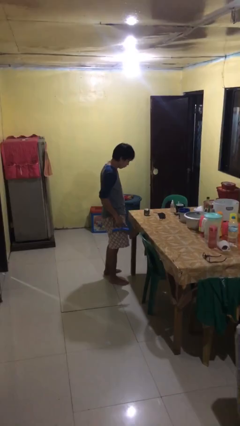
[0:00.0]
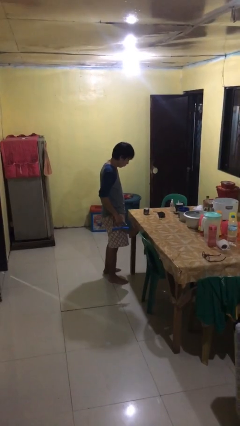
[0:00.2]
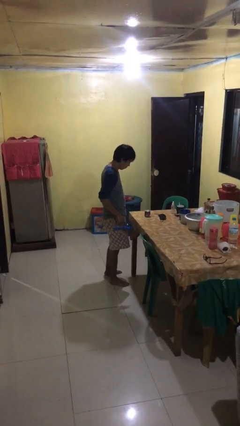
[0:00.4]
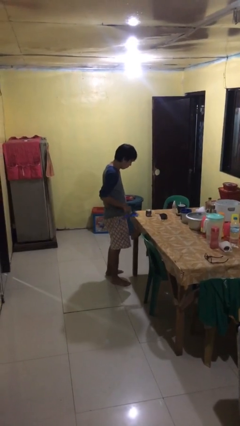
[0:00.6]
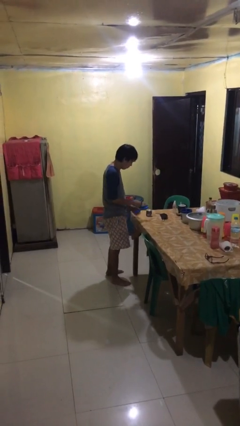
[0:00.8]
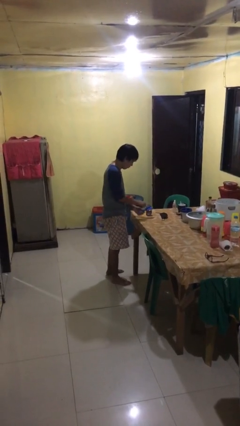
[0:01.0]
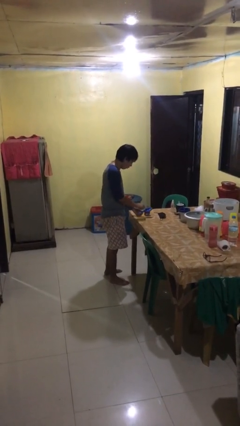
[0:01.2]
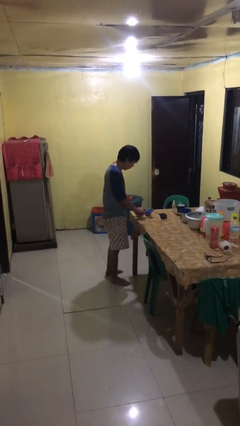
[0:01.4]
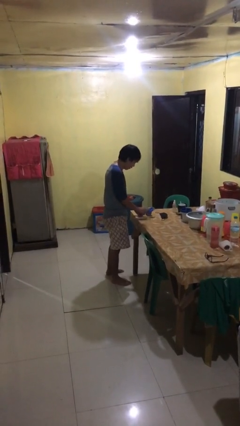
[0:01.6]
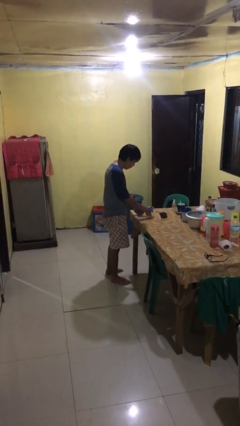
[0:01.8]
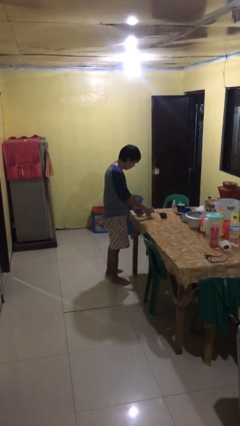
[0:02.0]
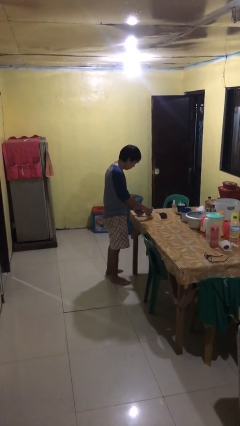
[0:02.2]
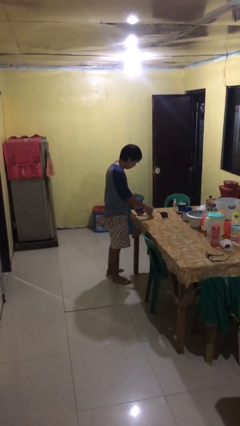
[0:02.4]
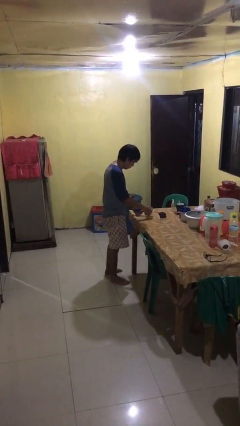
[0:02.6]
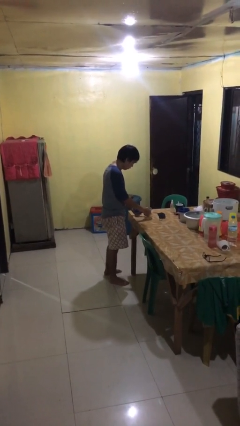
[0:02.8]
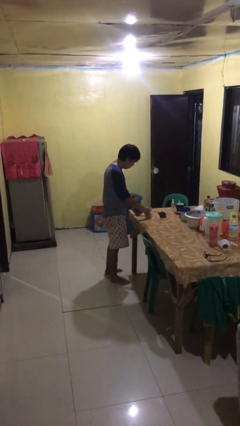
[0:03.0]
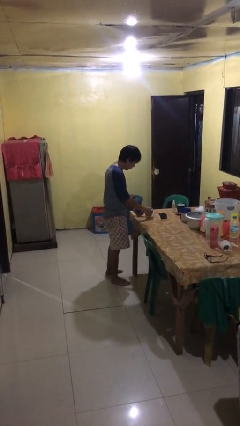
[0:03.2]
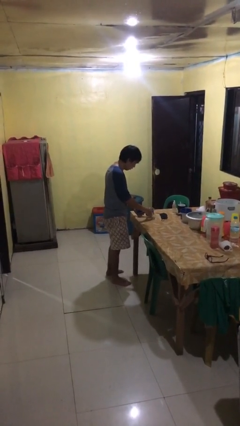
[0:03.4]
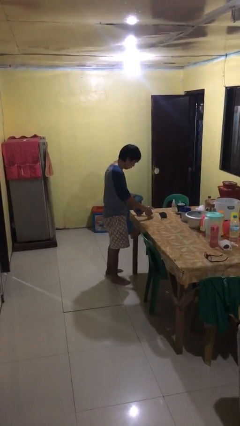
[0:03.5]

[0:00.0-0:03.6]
person opens can with can opener

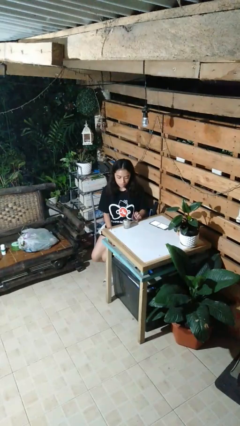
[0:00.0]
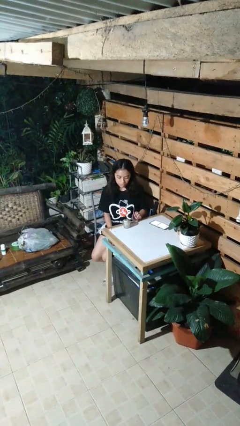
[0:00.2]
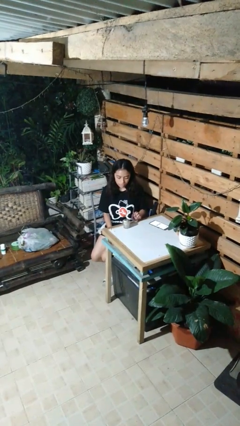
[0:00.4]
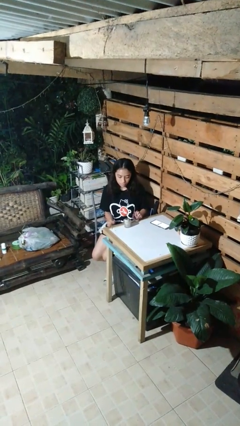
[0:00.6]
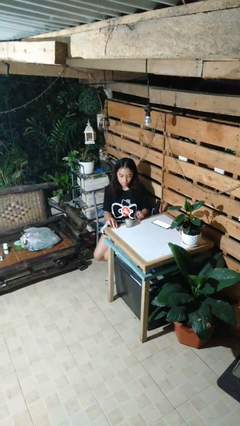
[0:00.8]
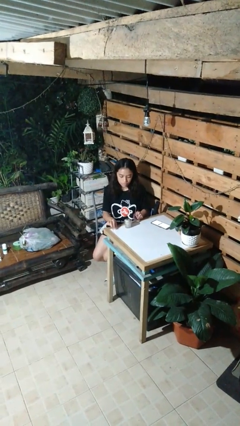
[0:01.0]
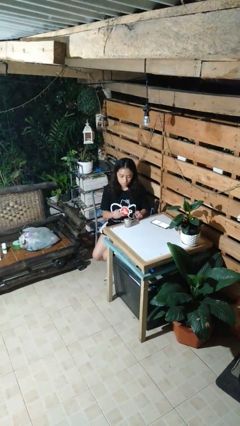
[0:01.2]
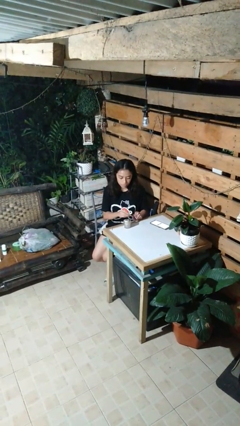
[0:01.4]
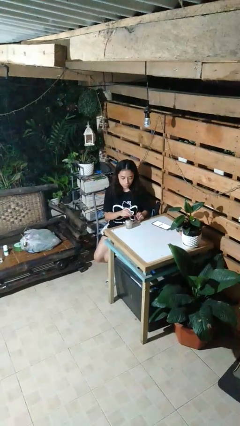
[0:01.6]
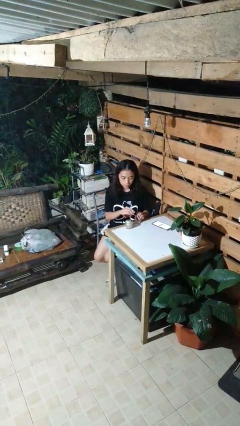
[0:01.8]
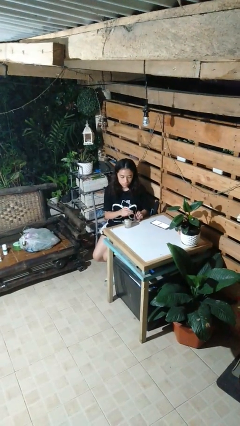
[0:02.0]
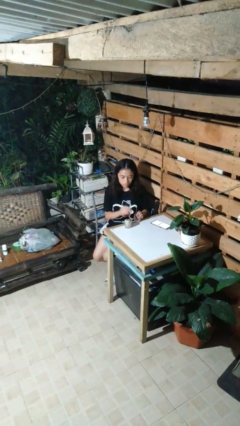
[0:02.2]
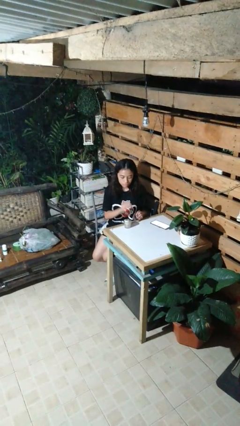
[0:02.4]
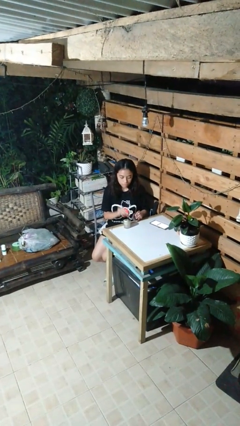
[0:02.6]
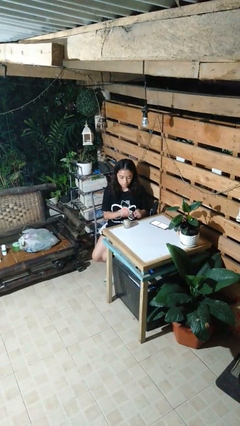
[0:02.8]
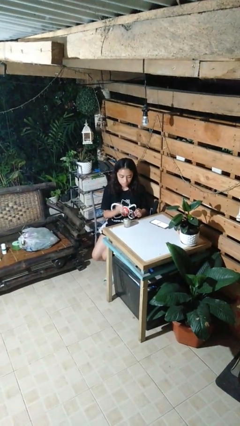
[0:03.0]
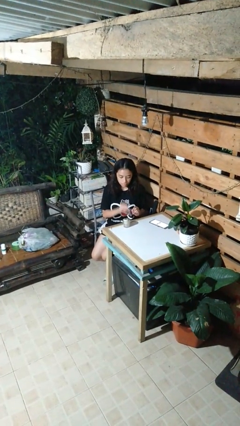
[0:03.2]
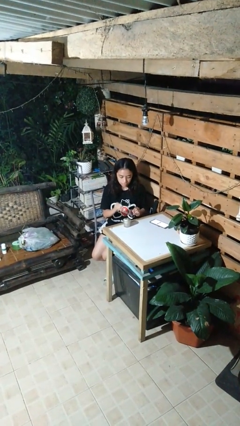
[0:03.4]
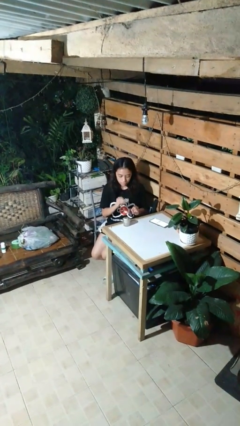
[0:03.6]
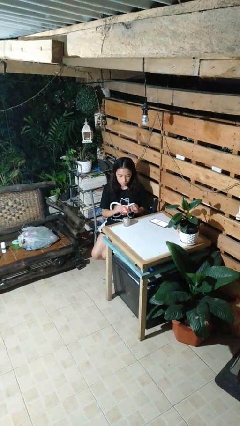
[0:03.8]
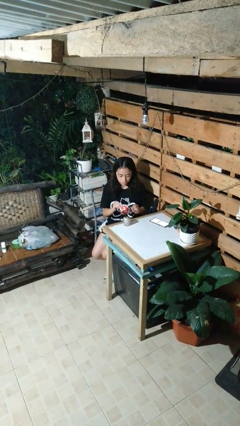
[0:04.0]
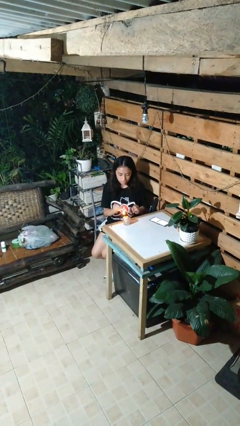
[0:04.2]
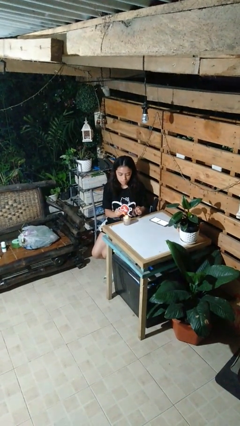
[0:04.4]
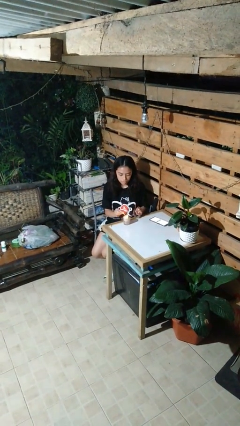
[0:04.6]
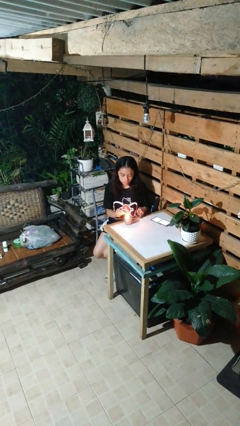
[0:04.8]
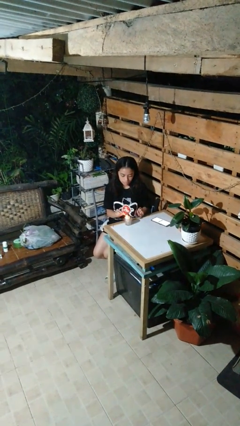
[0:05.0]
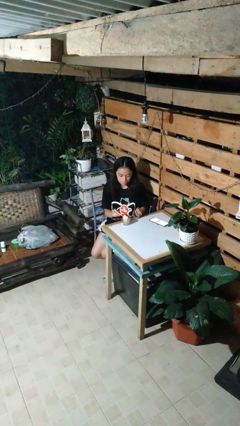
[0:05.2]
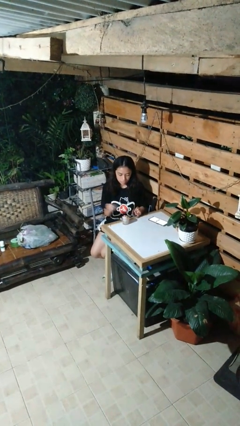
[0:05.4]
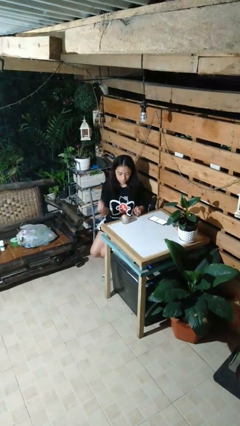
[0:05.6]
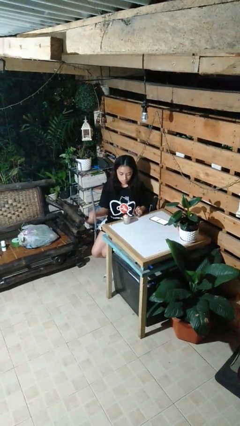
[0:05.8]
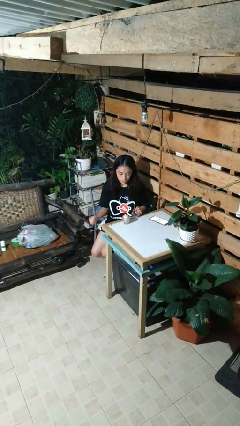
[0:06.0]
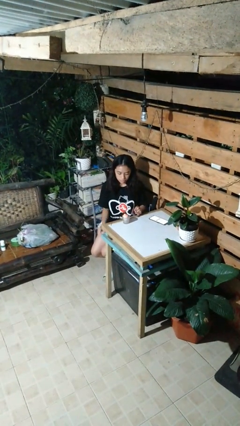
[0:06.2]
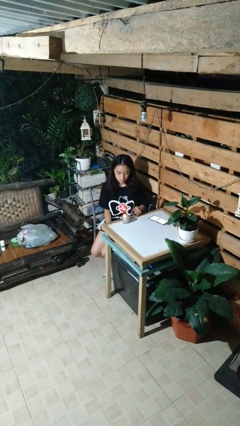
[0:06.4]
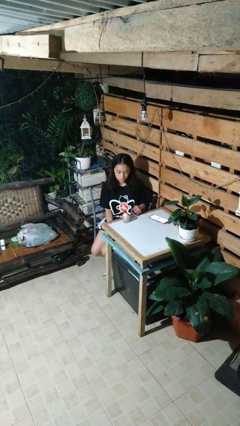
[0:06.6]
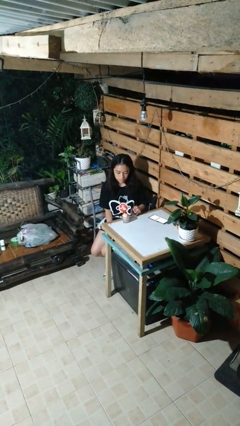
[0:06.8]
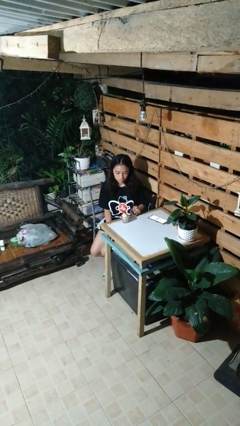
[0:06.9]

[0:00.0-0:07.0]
person lights candle

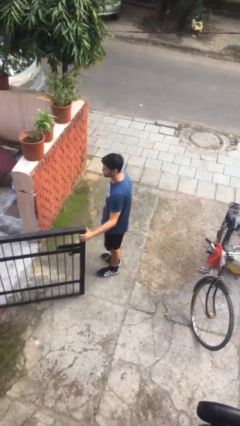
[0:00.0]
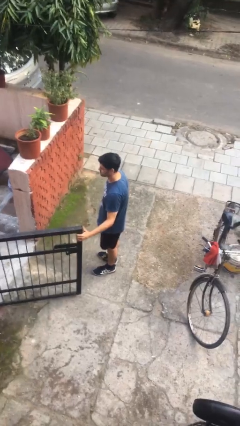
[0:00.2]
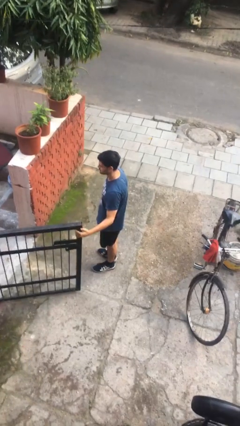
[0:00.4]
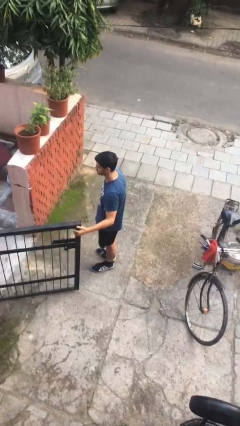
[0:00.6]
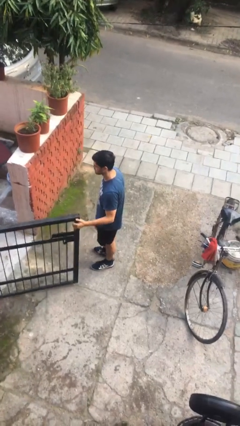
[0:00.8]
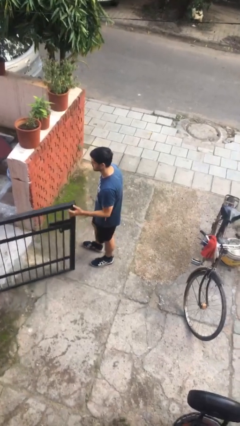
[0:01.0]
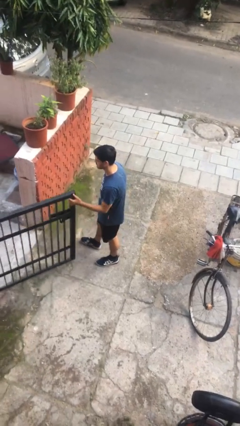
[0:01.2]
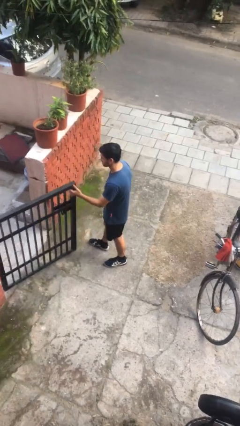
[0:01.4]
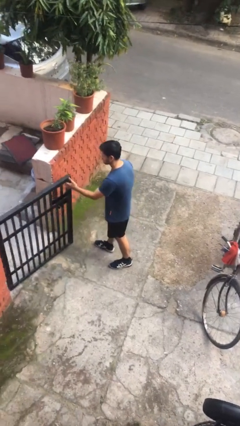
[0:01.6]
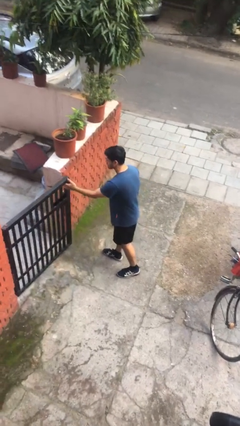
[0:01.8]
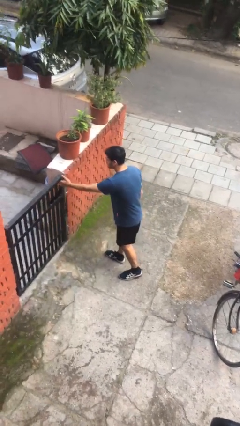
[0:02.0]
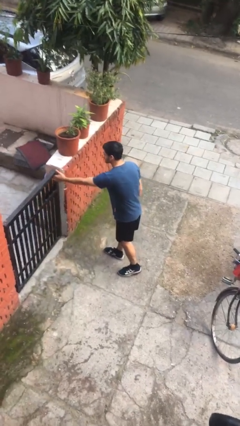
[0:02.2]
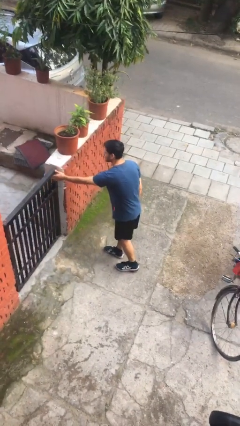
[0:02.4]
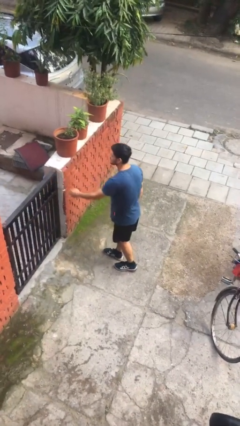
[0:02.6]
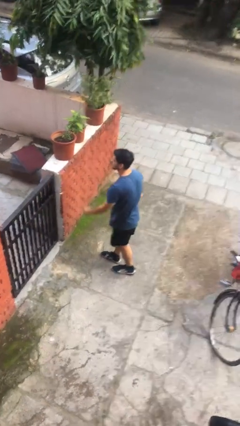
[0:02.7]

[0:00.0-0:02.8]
person closes gate

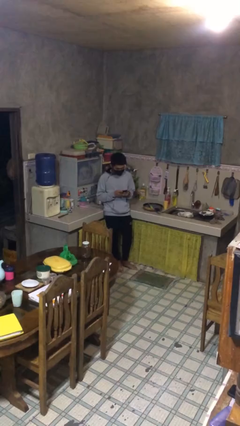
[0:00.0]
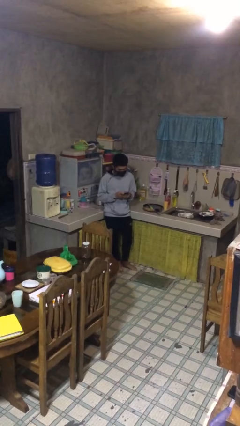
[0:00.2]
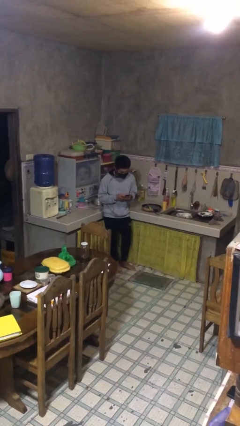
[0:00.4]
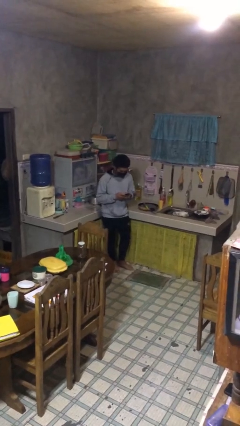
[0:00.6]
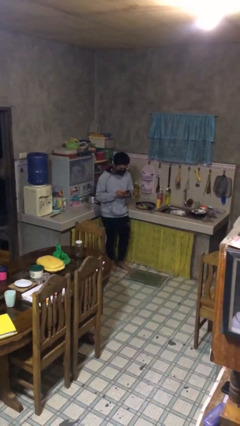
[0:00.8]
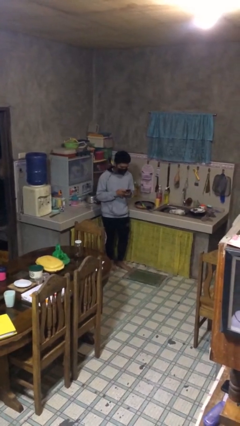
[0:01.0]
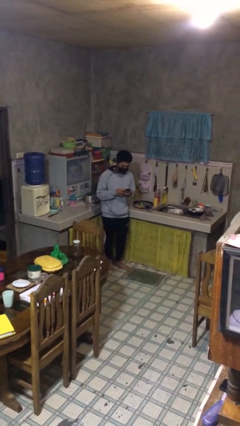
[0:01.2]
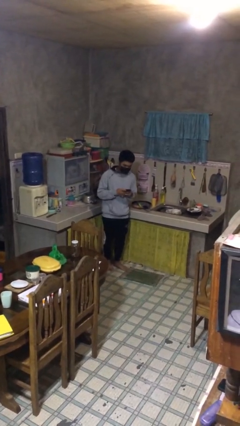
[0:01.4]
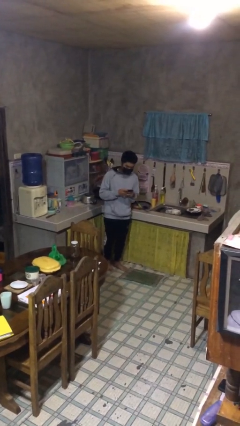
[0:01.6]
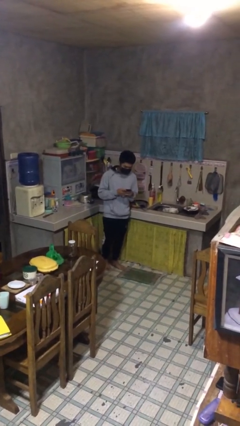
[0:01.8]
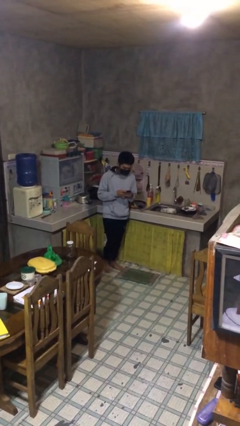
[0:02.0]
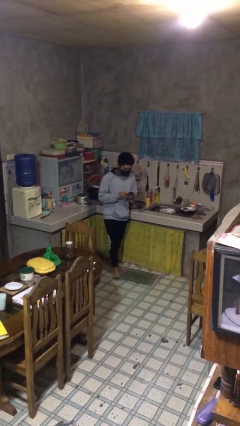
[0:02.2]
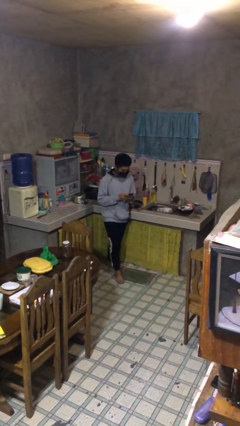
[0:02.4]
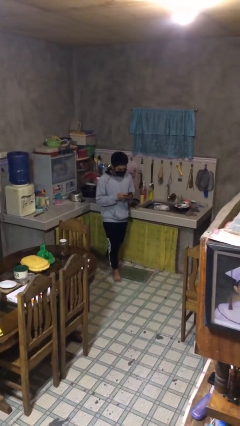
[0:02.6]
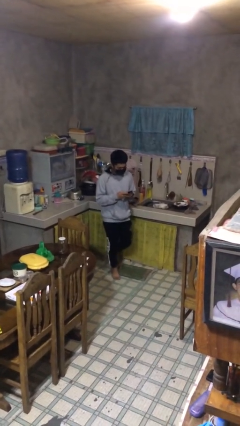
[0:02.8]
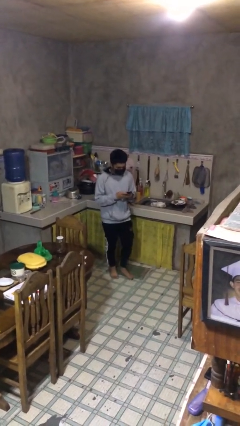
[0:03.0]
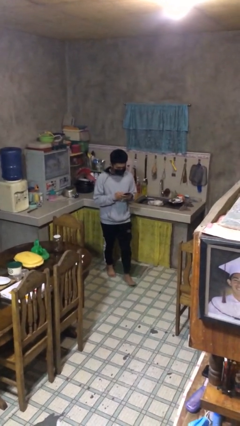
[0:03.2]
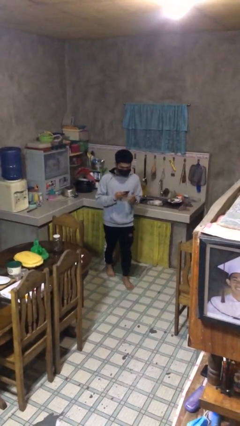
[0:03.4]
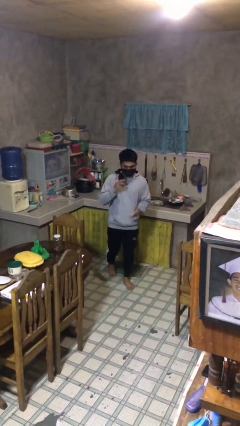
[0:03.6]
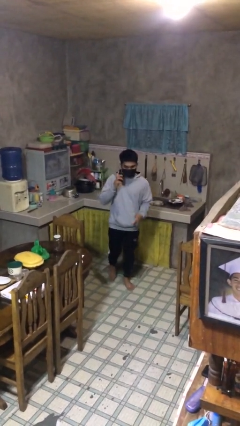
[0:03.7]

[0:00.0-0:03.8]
person texts on phone

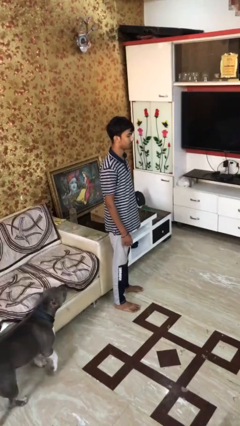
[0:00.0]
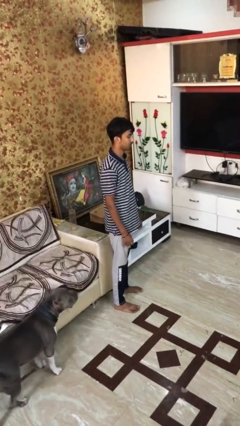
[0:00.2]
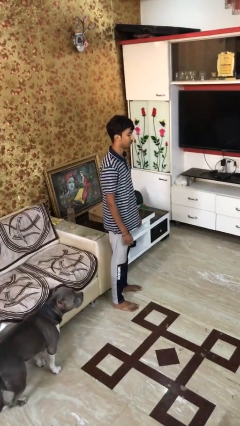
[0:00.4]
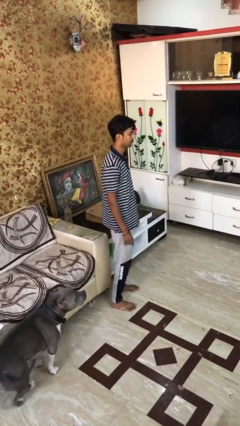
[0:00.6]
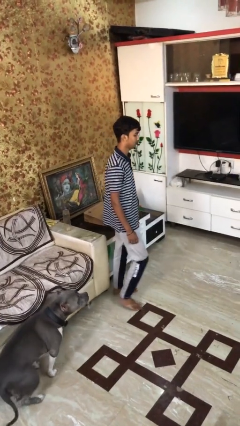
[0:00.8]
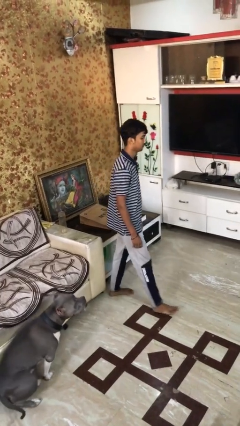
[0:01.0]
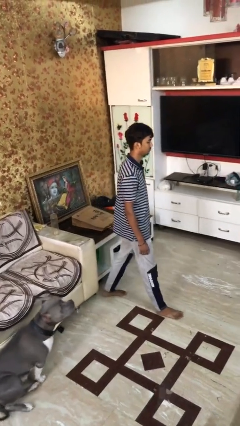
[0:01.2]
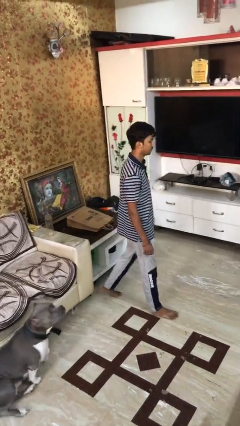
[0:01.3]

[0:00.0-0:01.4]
person bumps into person
